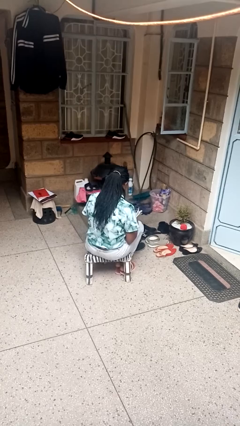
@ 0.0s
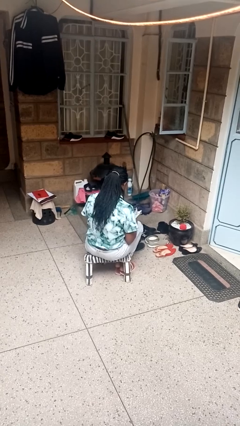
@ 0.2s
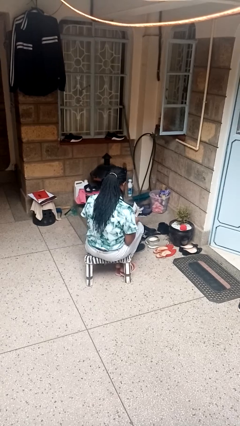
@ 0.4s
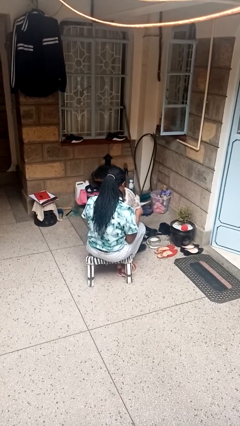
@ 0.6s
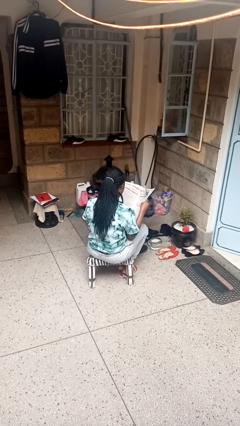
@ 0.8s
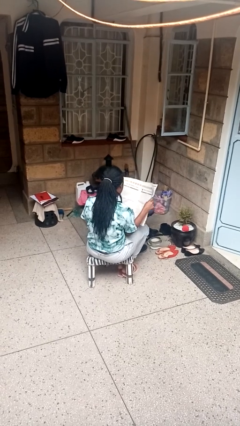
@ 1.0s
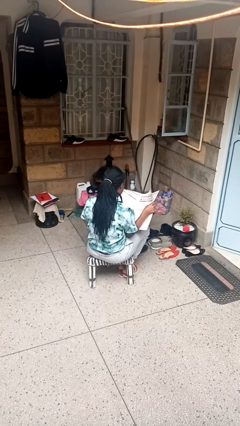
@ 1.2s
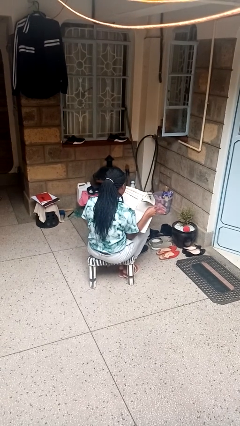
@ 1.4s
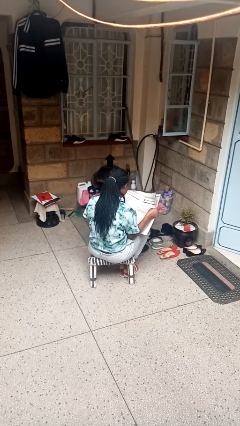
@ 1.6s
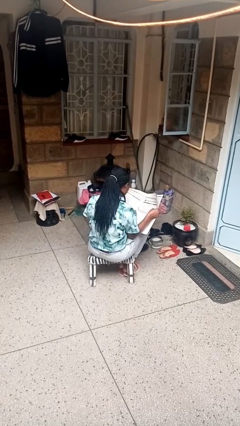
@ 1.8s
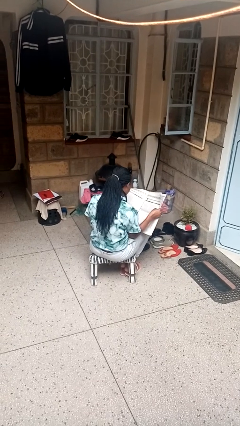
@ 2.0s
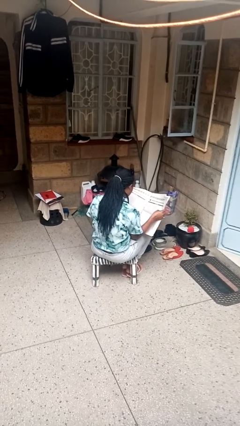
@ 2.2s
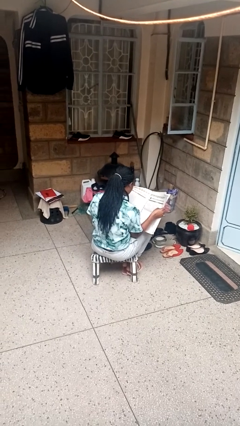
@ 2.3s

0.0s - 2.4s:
person reads newspaper

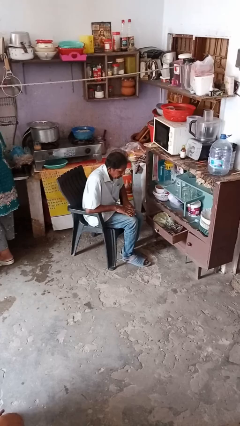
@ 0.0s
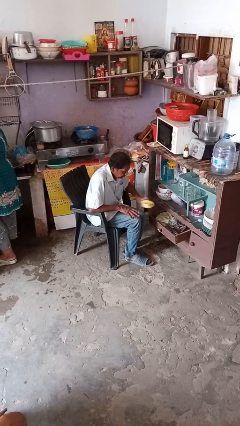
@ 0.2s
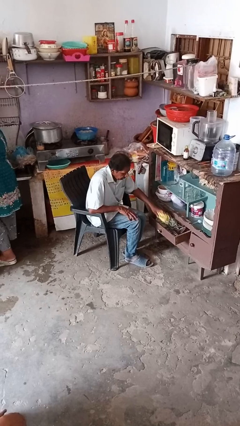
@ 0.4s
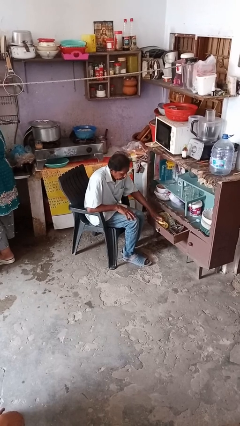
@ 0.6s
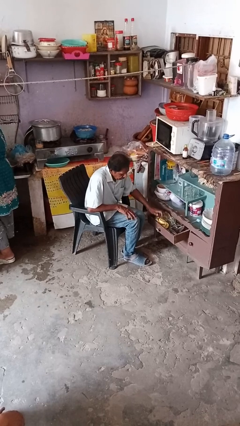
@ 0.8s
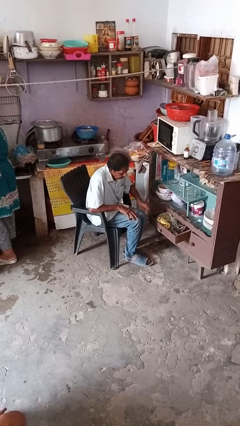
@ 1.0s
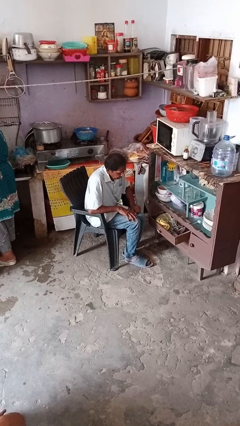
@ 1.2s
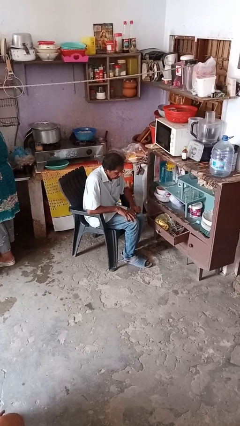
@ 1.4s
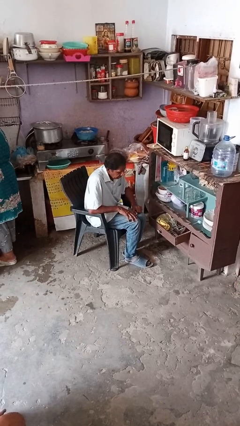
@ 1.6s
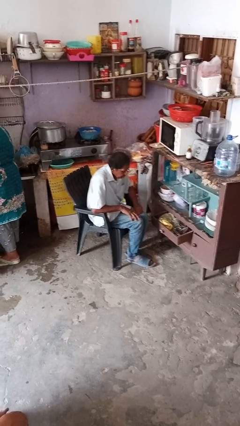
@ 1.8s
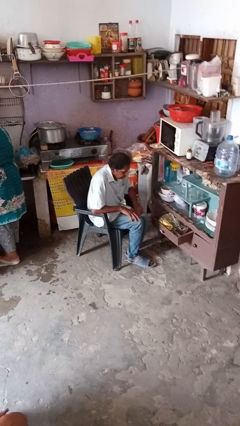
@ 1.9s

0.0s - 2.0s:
person puts clothes into dresser

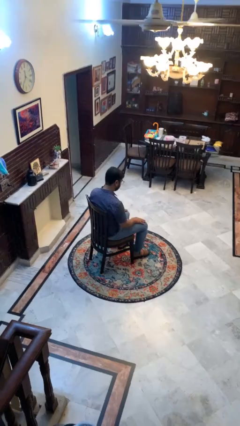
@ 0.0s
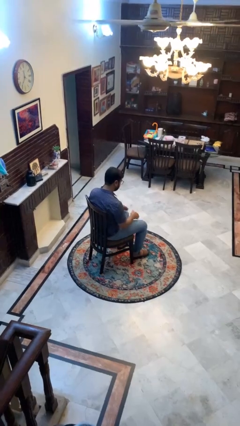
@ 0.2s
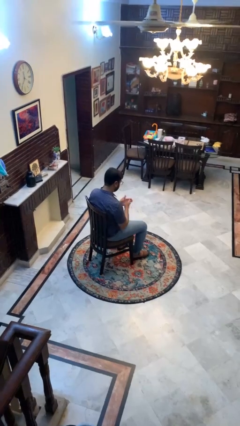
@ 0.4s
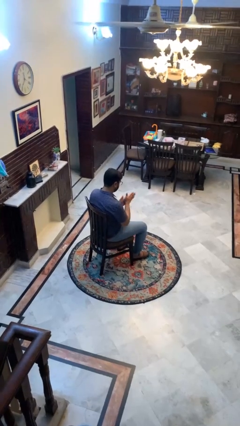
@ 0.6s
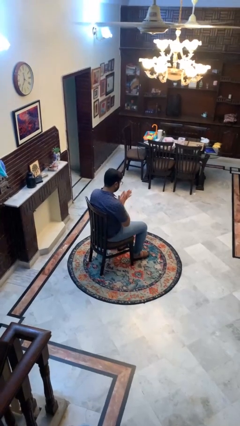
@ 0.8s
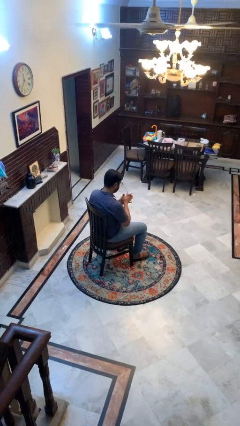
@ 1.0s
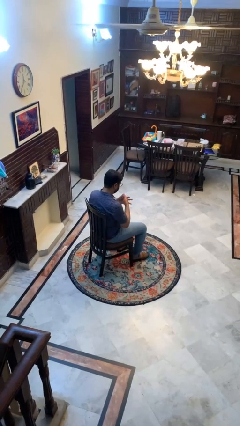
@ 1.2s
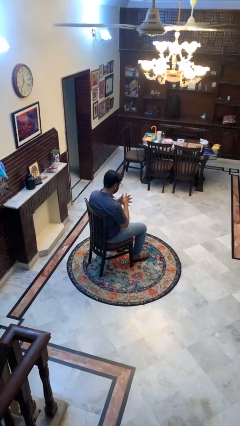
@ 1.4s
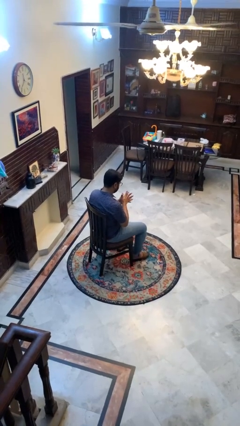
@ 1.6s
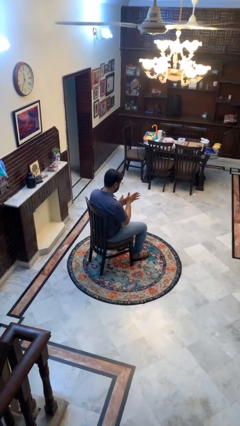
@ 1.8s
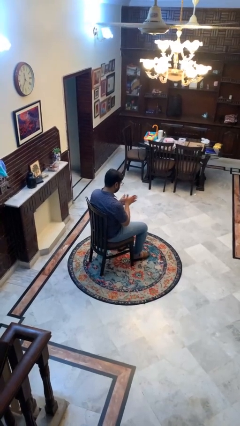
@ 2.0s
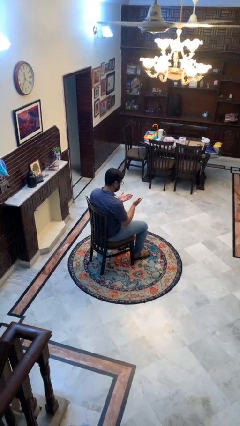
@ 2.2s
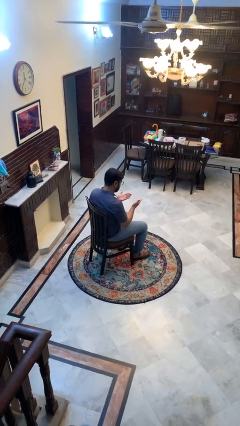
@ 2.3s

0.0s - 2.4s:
person looks at hands in lap

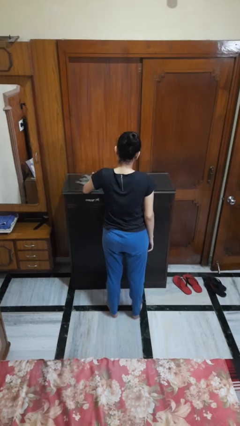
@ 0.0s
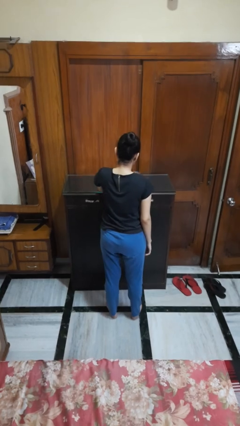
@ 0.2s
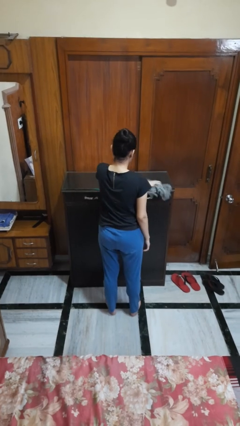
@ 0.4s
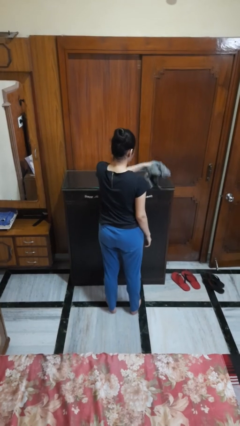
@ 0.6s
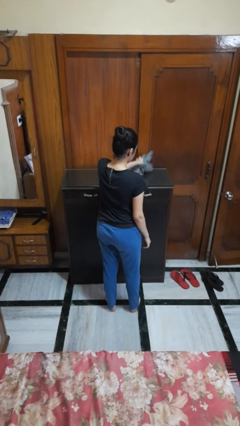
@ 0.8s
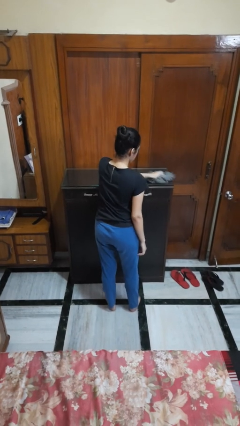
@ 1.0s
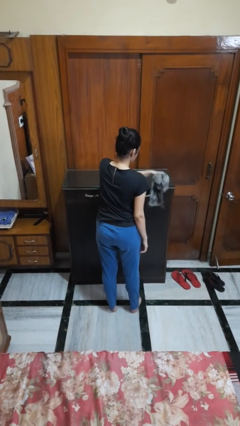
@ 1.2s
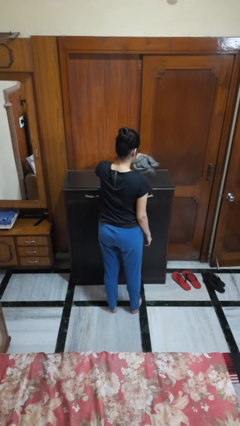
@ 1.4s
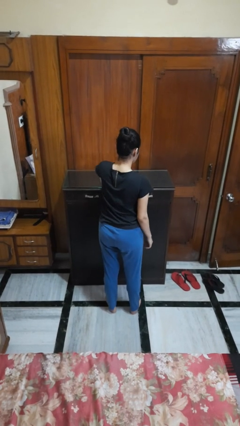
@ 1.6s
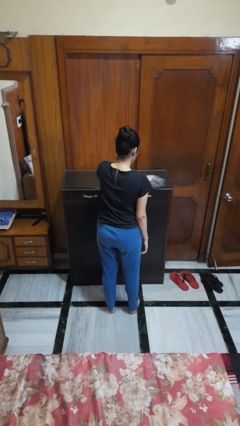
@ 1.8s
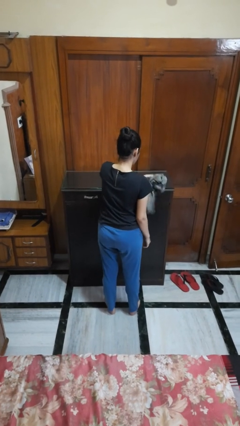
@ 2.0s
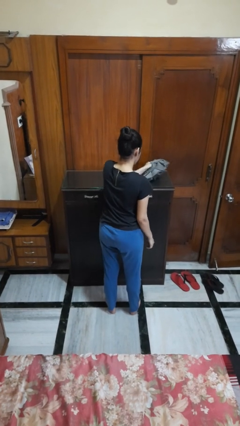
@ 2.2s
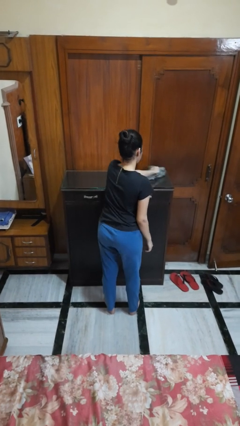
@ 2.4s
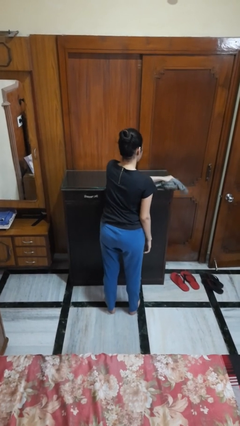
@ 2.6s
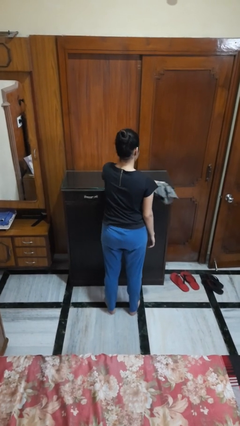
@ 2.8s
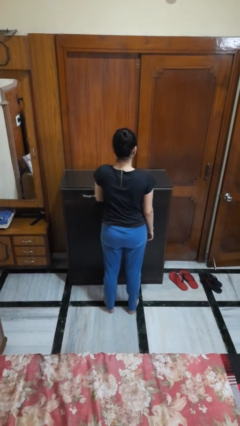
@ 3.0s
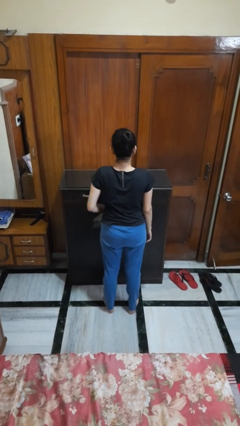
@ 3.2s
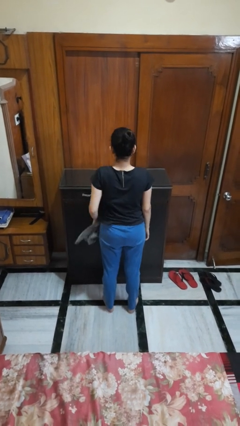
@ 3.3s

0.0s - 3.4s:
person cleans table with rag

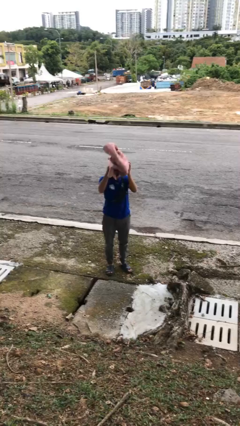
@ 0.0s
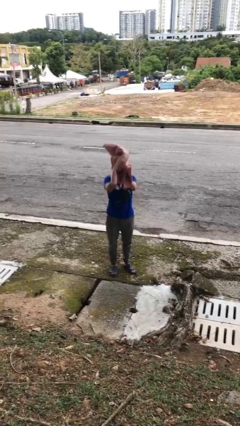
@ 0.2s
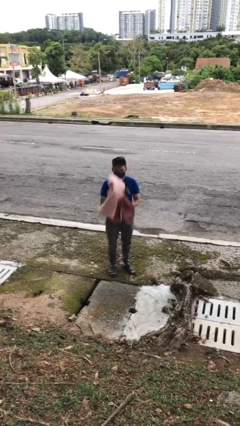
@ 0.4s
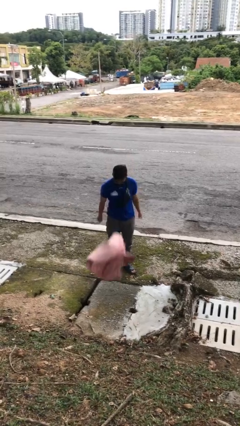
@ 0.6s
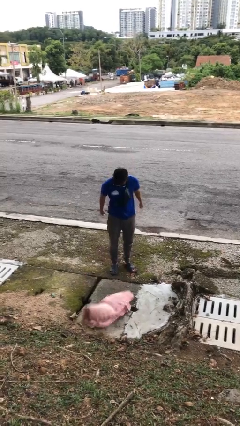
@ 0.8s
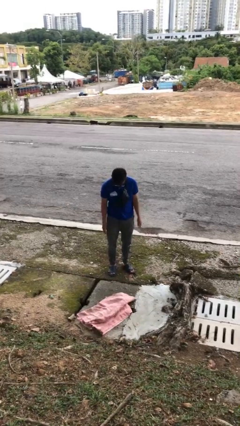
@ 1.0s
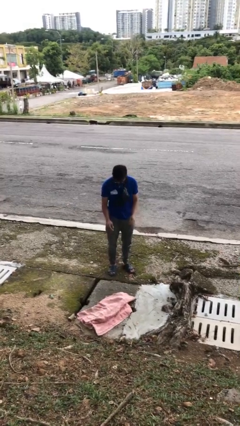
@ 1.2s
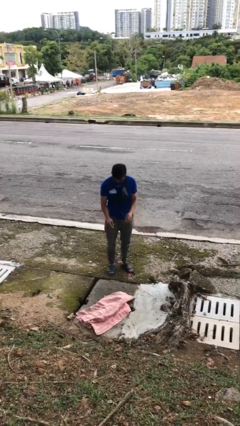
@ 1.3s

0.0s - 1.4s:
person throws object into air

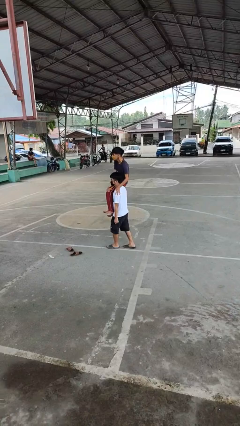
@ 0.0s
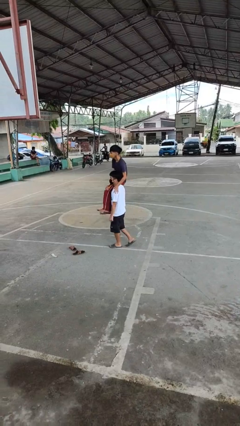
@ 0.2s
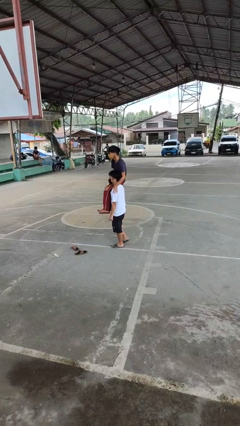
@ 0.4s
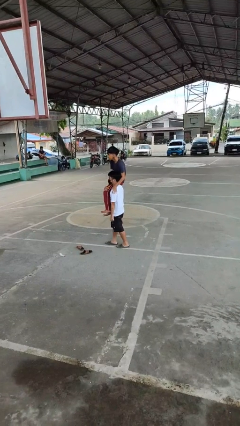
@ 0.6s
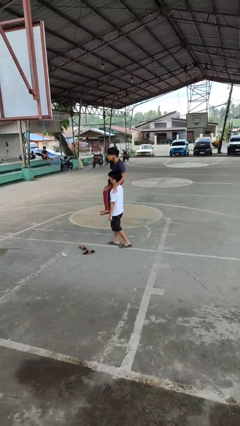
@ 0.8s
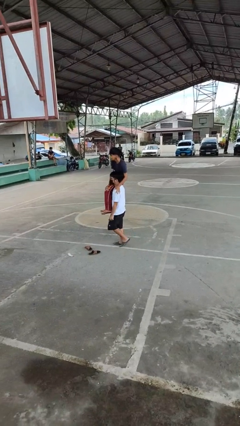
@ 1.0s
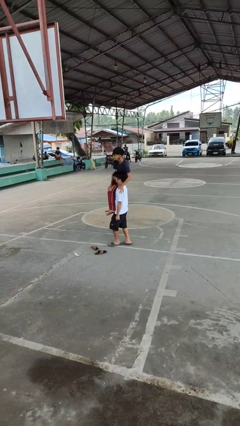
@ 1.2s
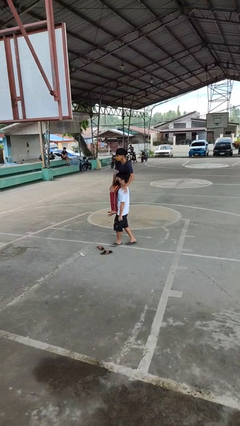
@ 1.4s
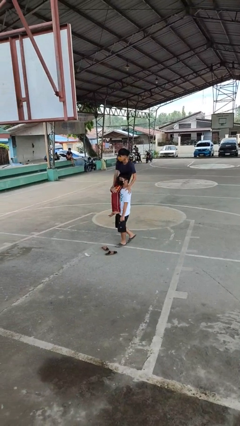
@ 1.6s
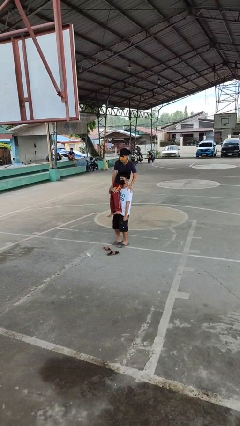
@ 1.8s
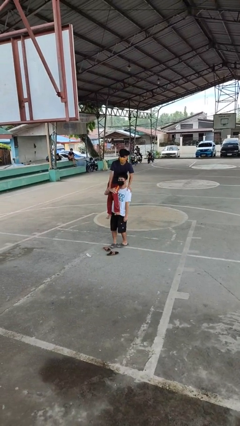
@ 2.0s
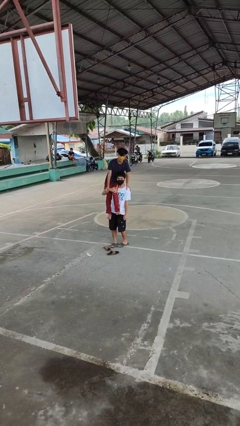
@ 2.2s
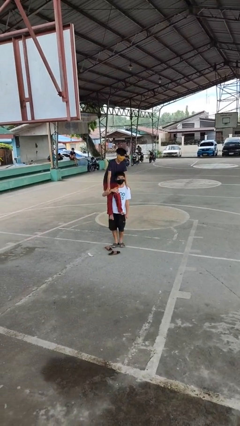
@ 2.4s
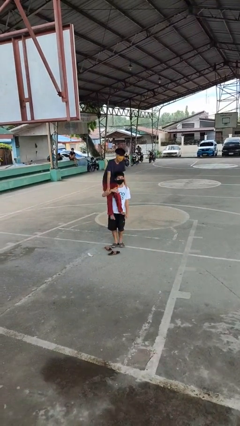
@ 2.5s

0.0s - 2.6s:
person carries person on shoulders

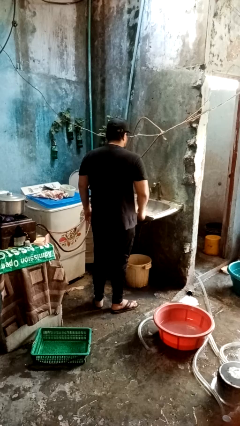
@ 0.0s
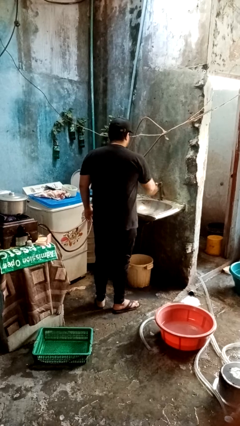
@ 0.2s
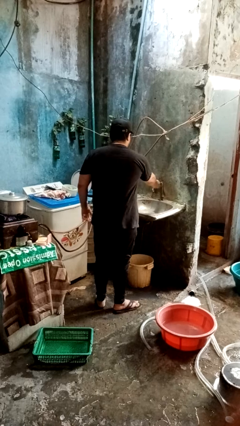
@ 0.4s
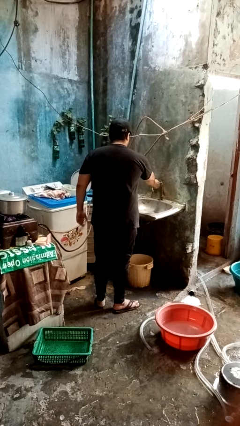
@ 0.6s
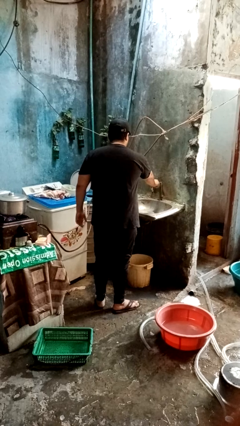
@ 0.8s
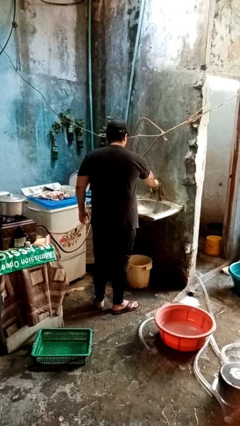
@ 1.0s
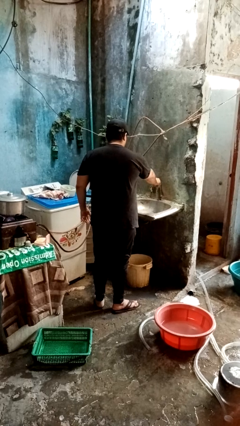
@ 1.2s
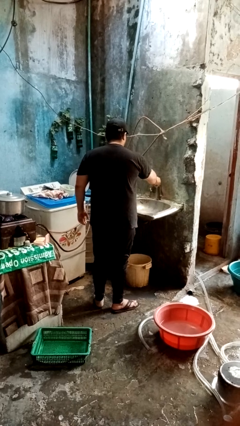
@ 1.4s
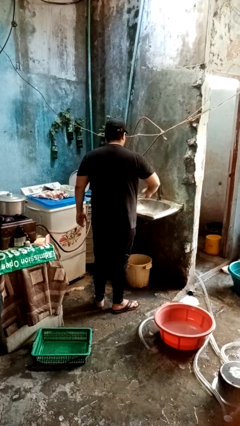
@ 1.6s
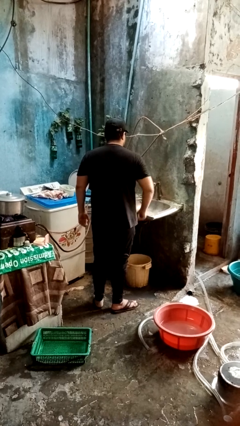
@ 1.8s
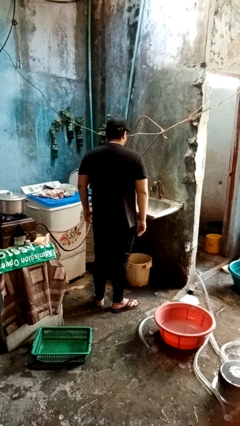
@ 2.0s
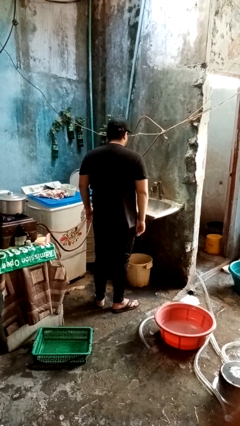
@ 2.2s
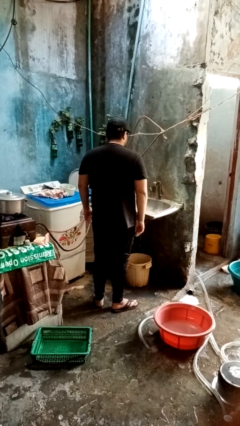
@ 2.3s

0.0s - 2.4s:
person turns on faucet

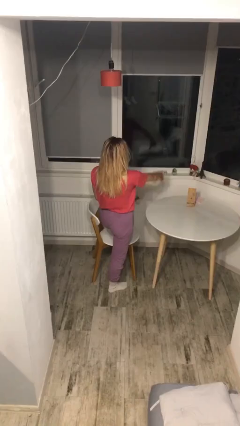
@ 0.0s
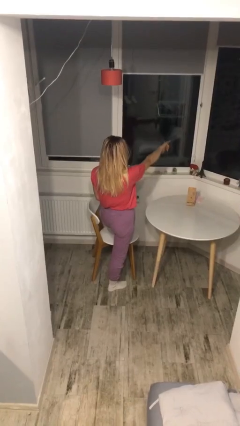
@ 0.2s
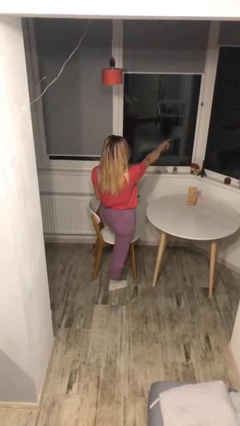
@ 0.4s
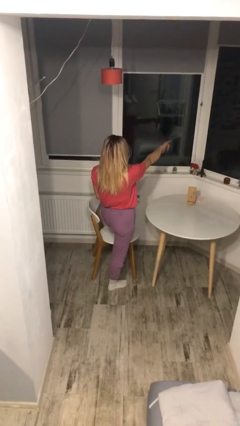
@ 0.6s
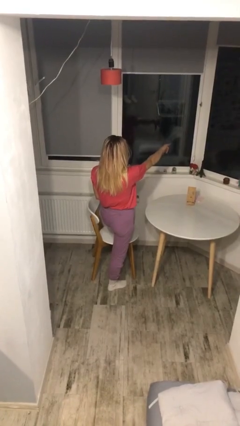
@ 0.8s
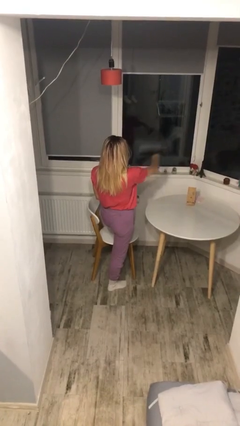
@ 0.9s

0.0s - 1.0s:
person gestures hang loose
